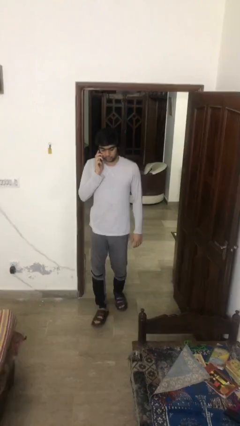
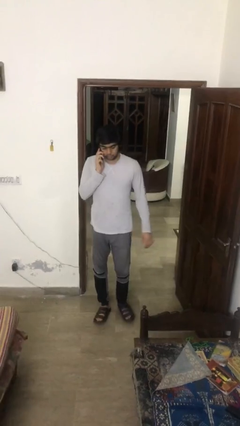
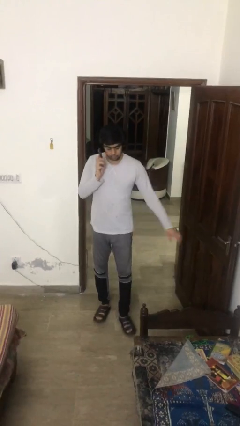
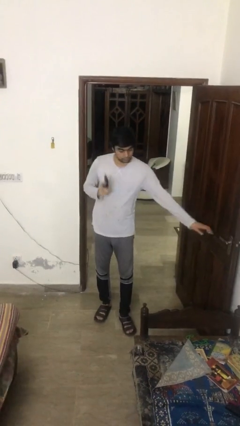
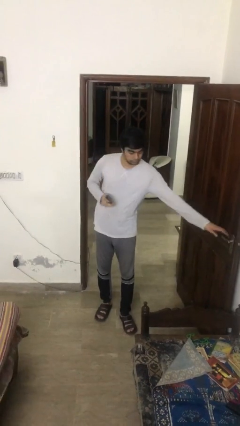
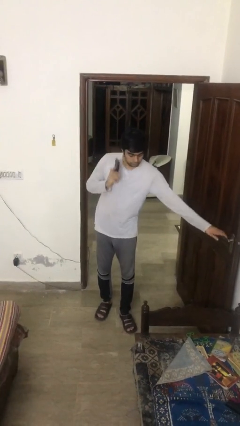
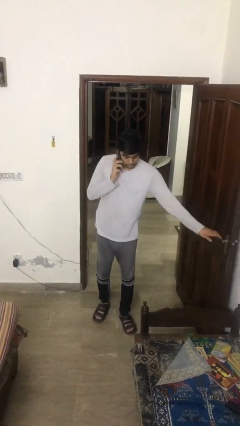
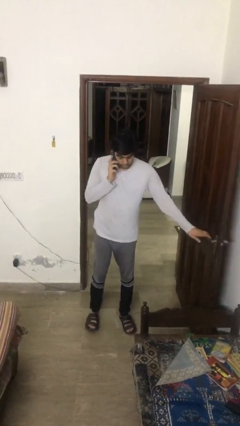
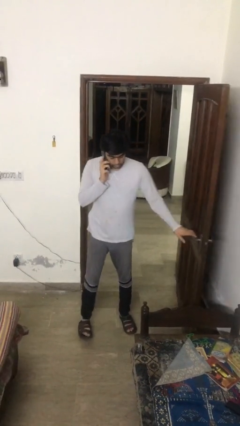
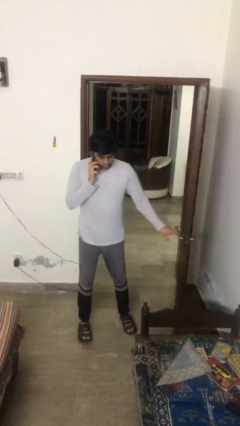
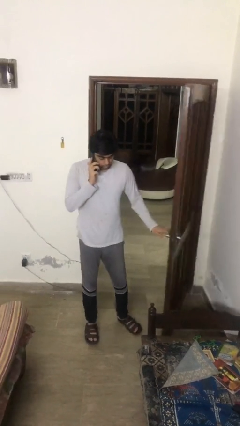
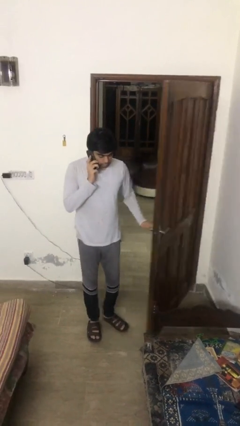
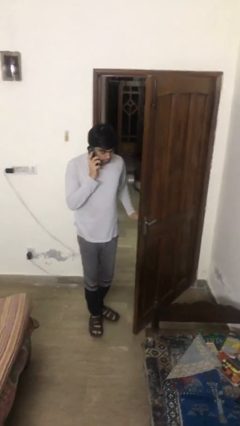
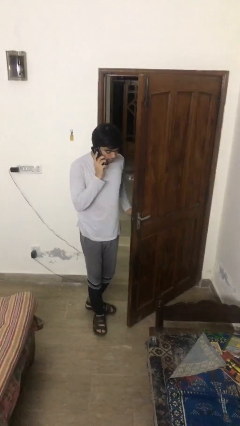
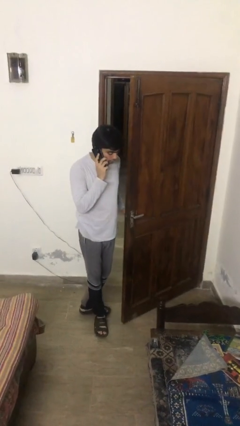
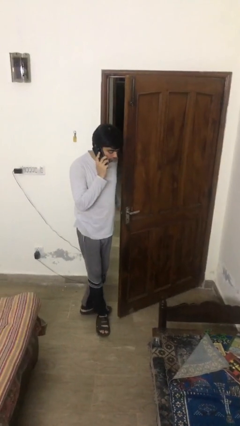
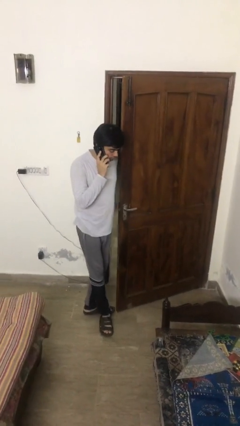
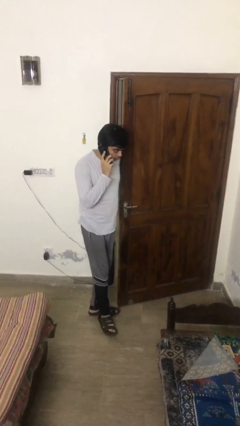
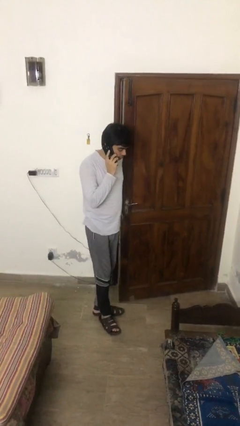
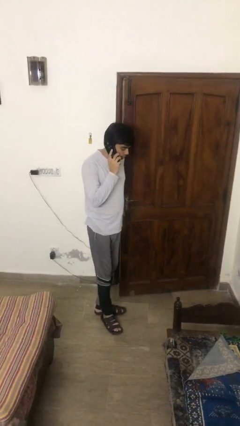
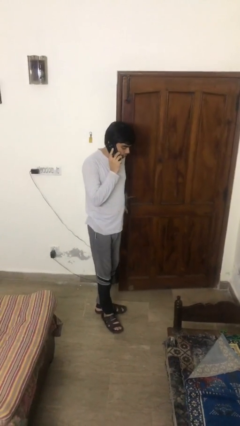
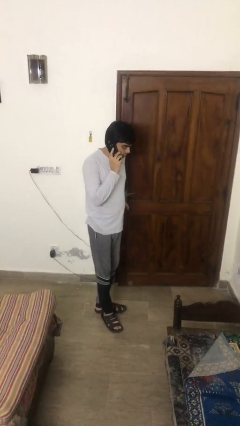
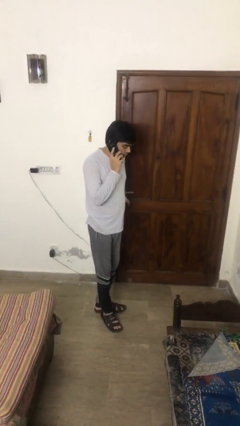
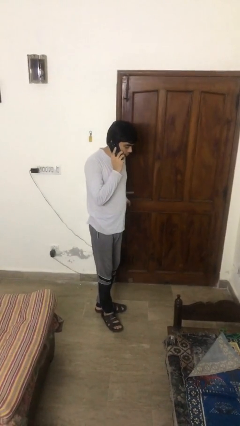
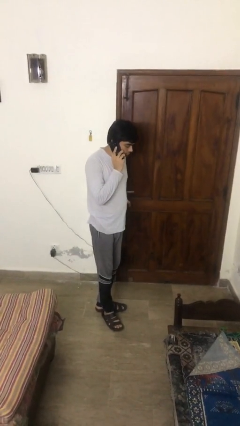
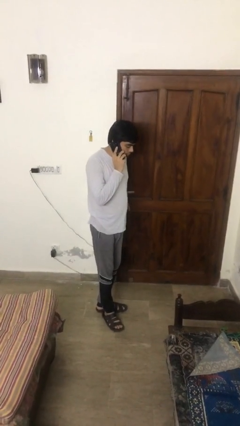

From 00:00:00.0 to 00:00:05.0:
person closes facility door

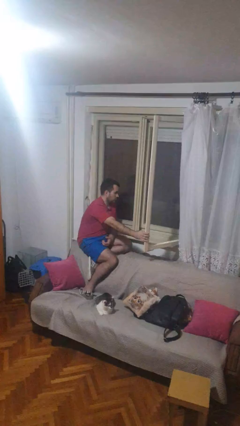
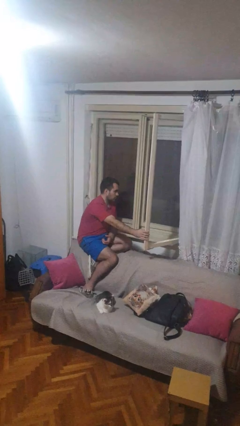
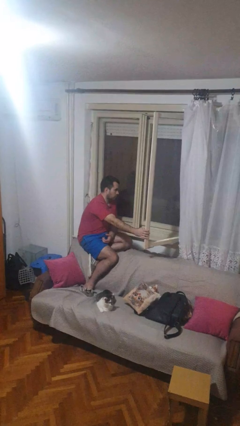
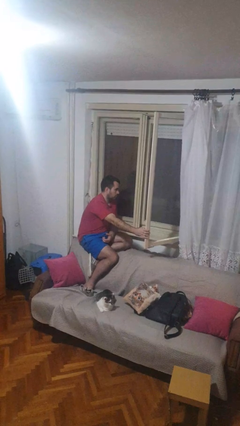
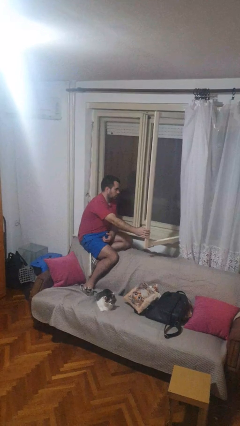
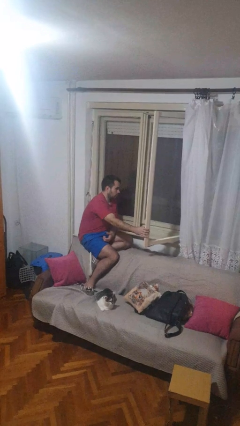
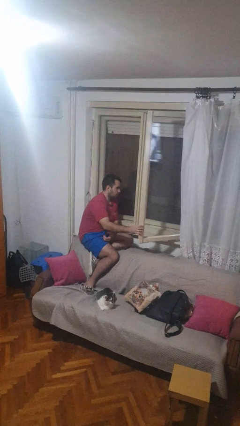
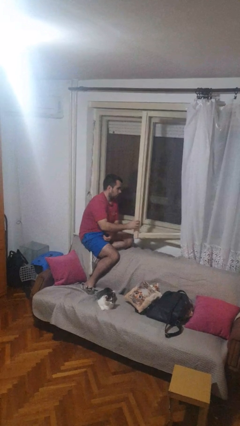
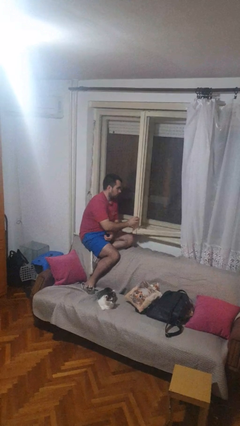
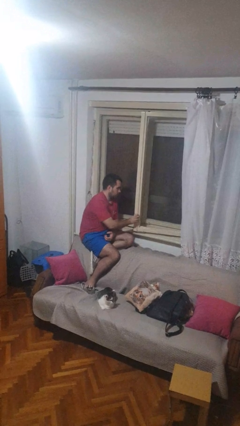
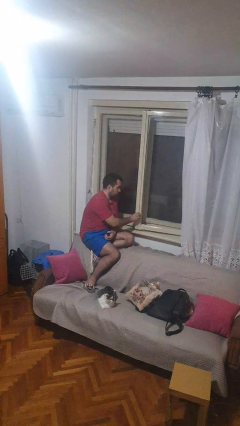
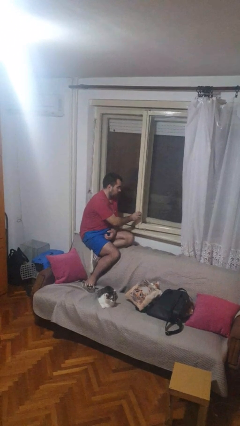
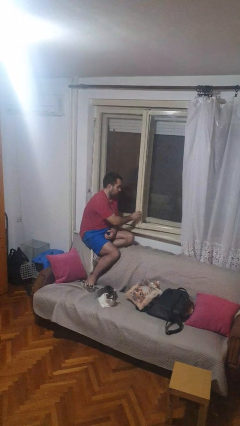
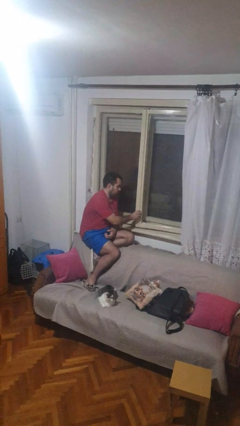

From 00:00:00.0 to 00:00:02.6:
person closes home window

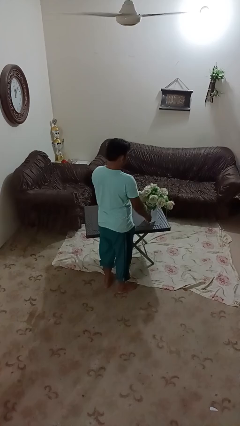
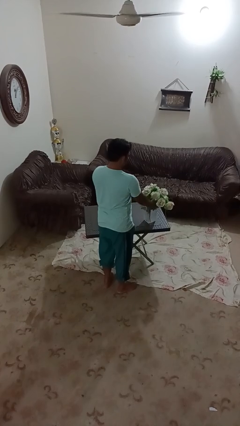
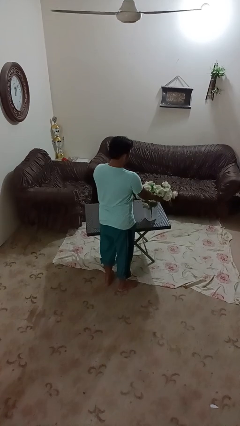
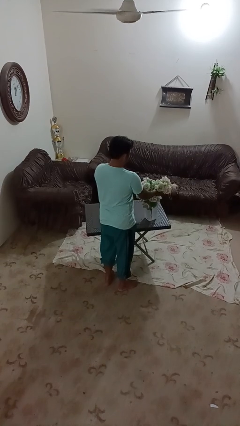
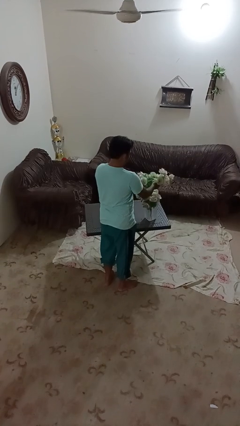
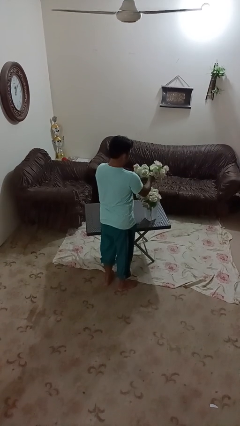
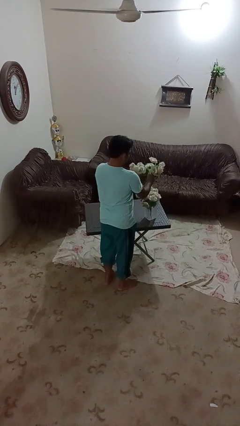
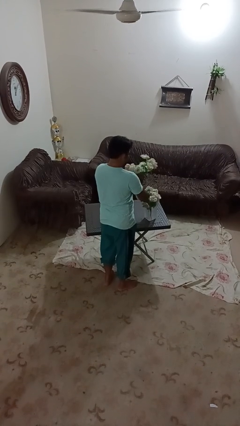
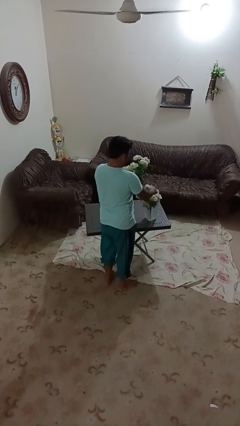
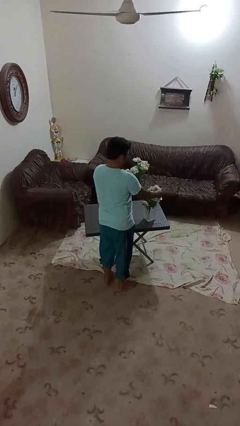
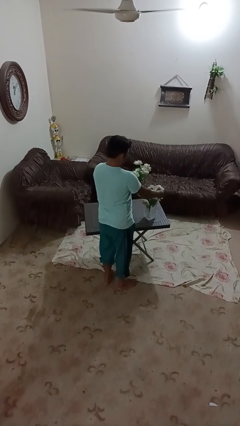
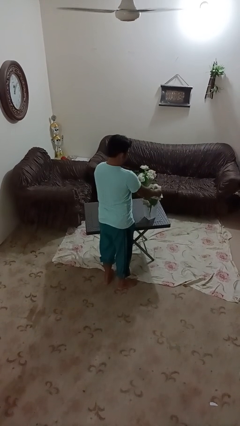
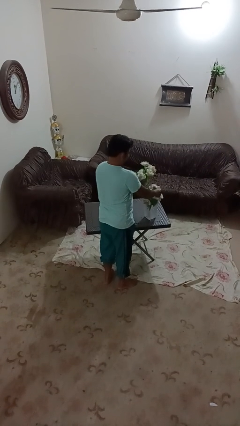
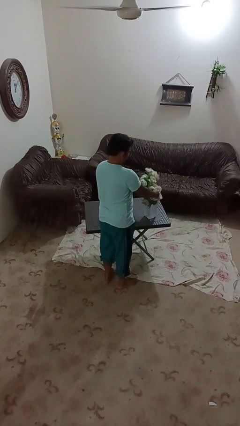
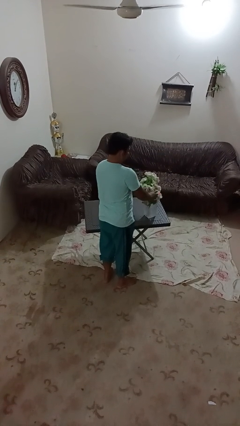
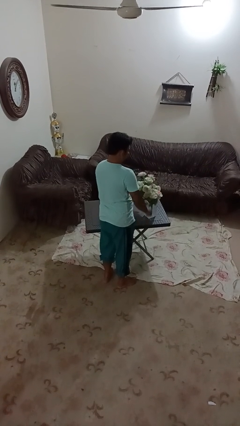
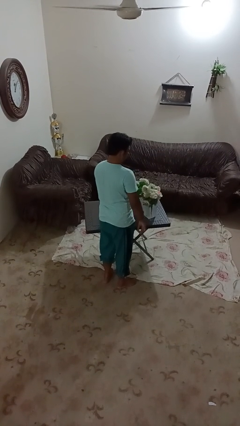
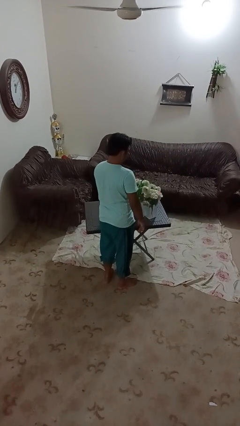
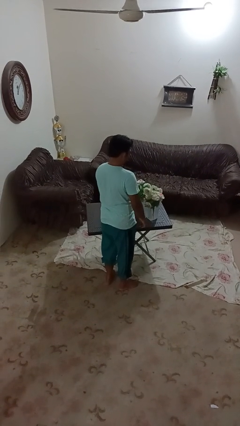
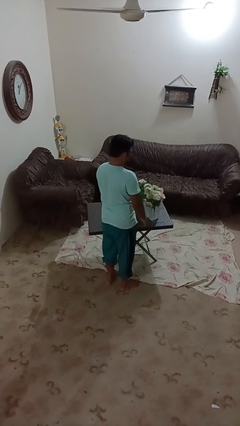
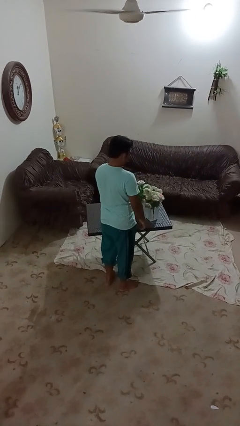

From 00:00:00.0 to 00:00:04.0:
person arranges flowers in vase

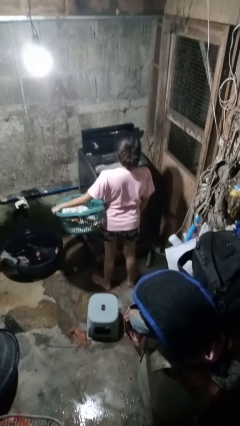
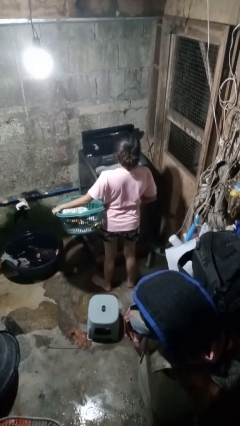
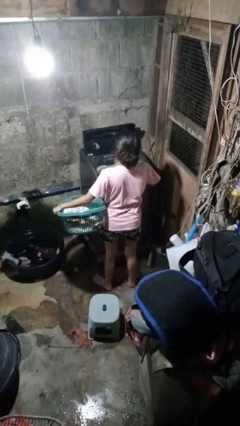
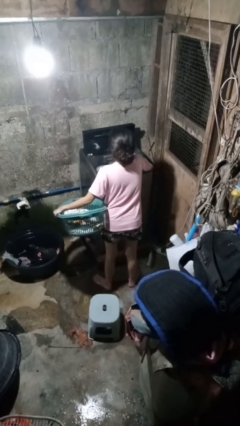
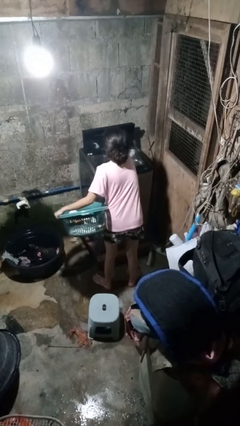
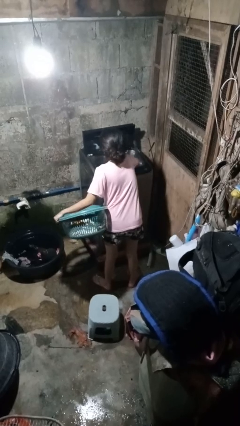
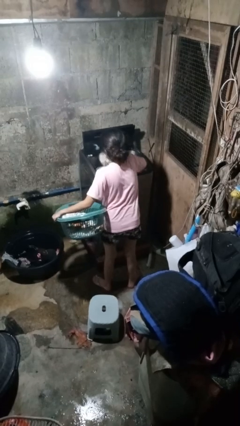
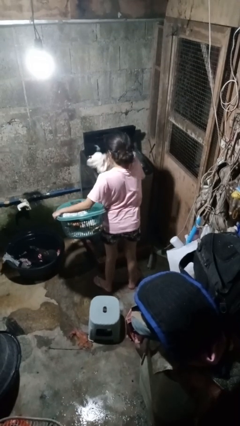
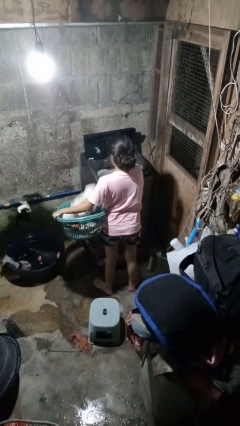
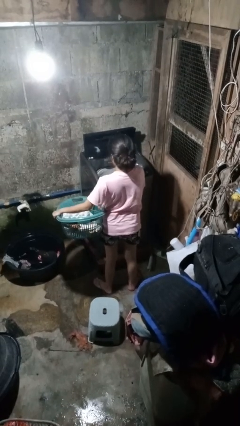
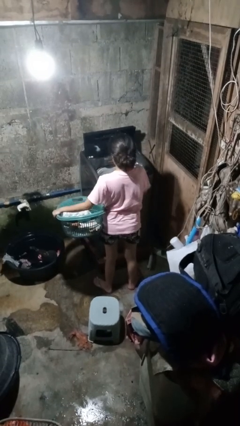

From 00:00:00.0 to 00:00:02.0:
person unloads dryer

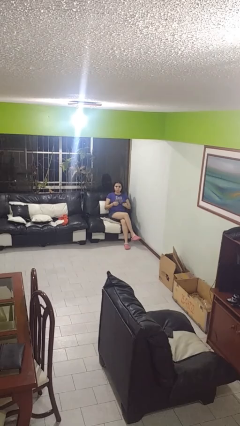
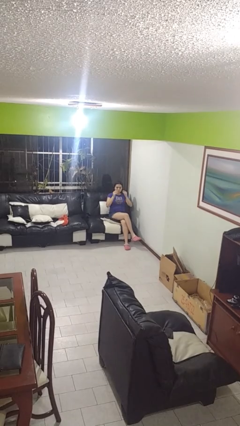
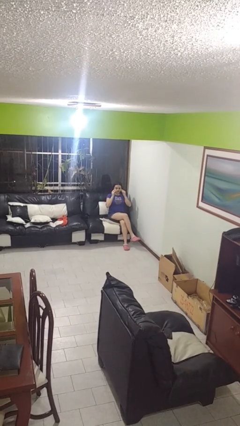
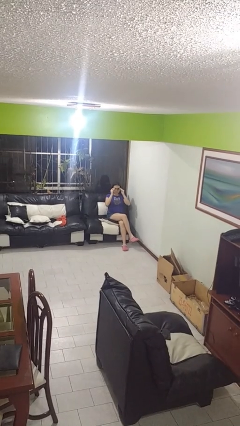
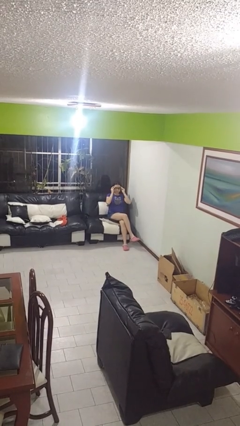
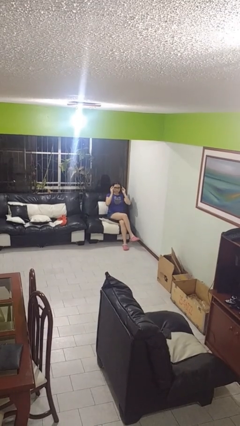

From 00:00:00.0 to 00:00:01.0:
person puts on glasses

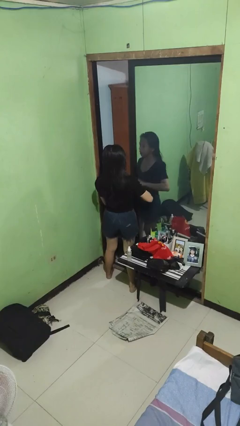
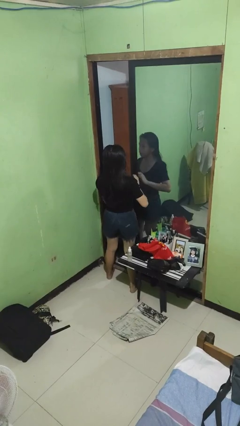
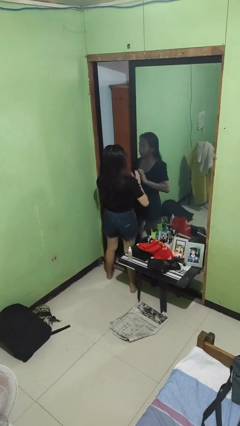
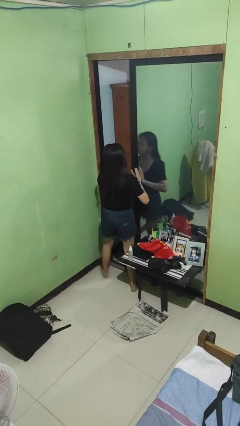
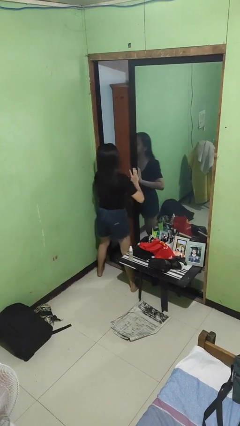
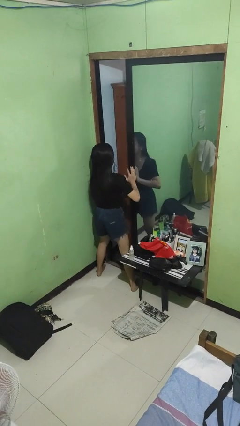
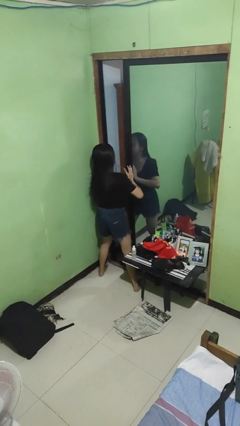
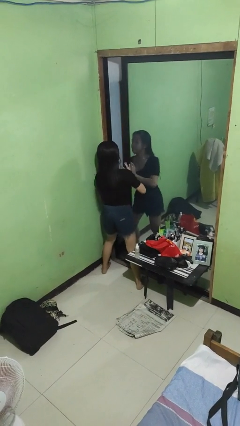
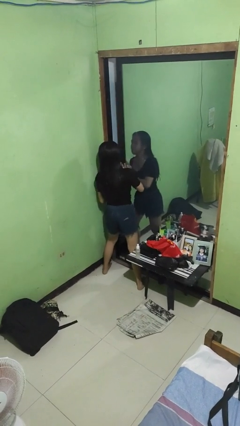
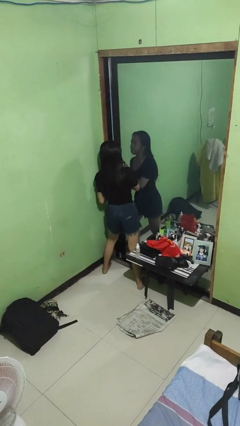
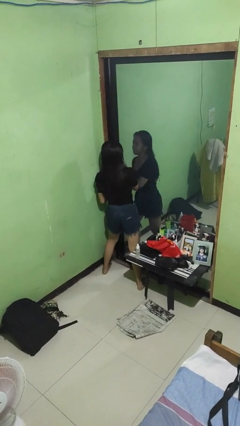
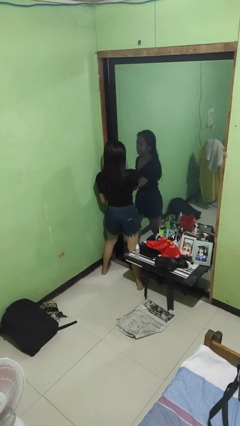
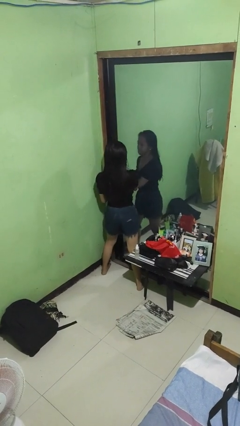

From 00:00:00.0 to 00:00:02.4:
person closes sliding door

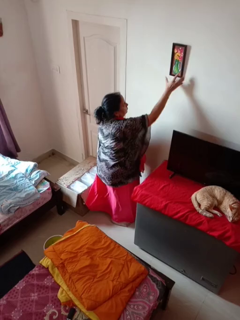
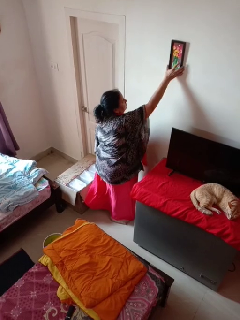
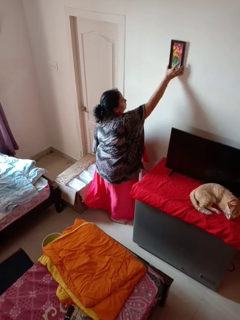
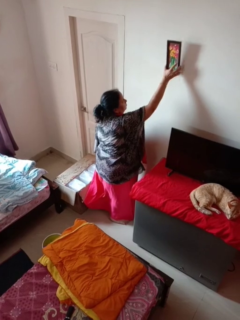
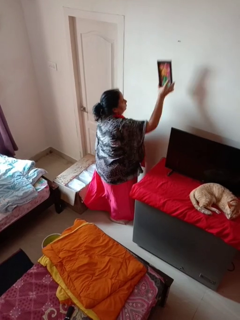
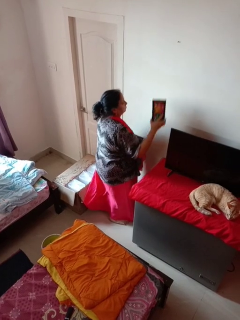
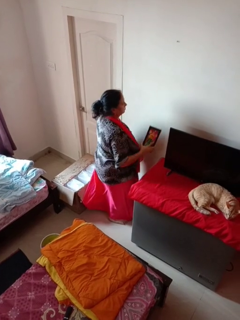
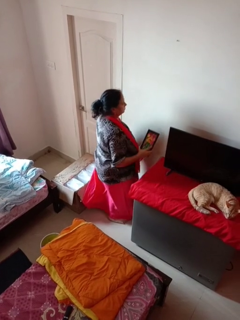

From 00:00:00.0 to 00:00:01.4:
person takes down picture frame
